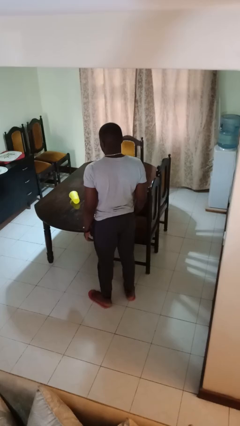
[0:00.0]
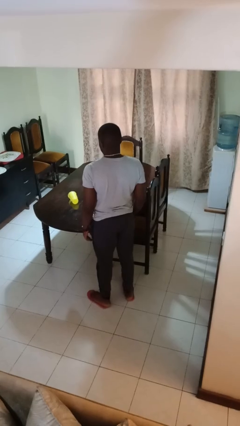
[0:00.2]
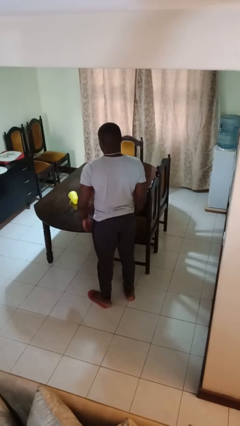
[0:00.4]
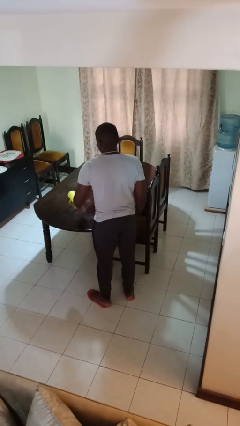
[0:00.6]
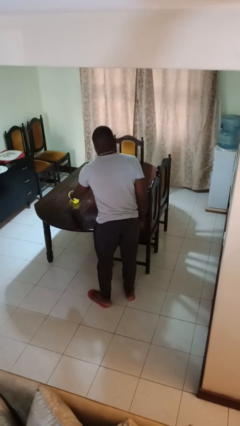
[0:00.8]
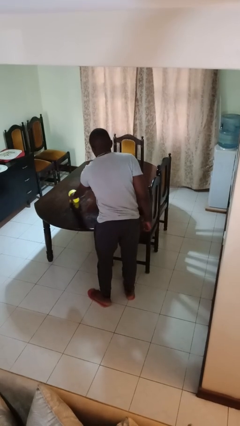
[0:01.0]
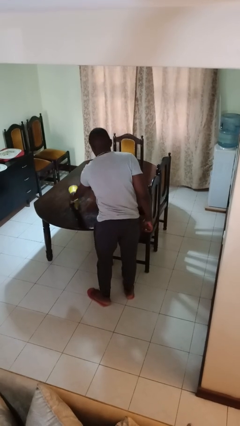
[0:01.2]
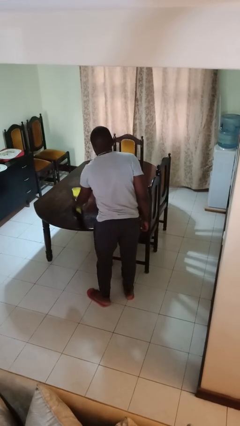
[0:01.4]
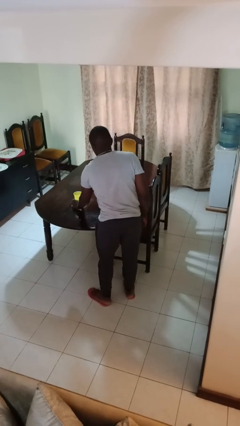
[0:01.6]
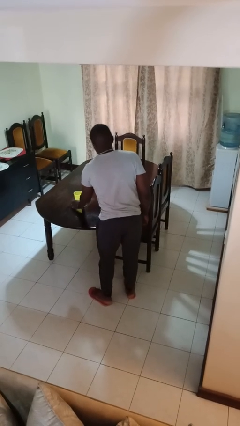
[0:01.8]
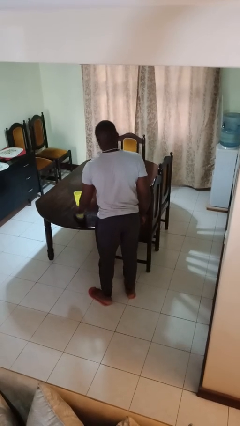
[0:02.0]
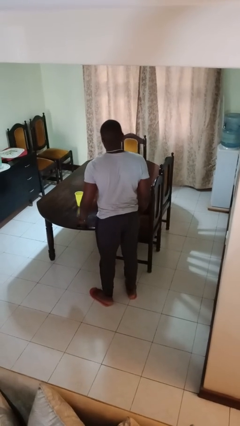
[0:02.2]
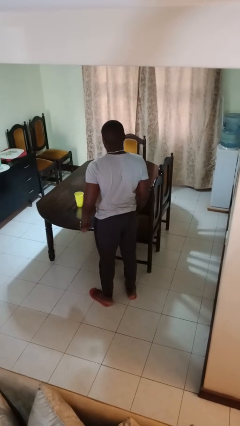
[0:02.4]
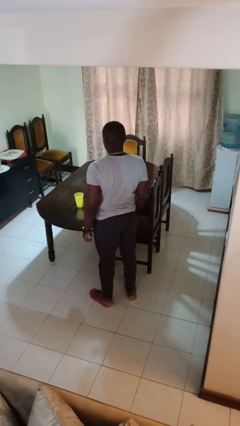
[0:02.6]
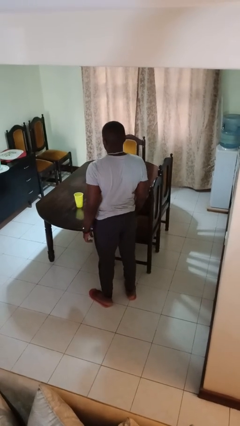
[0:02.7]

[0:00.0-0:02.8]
person sets upright glass

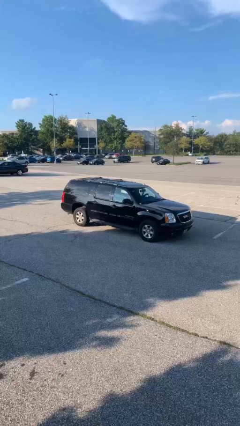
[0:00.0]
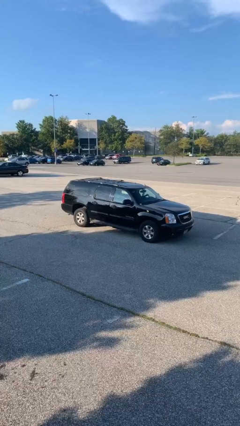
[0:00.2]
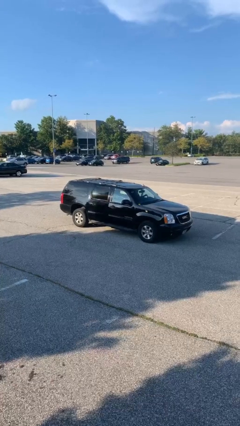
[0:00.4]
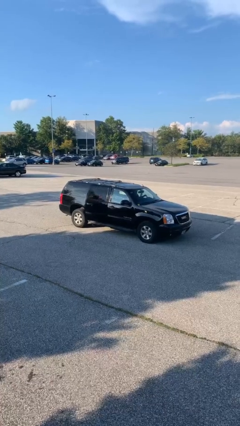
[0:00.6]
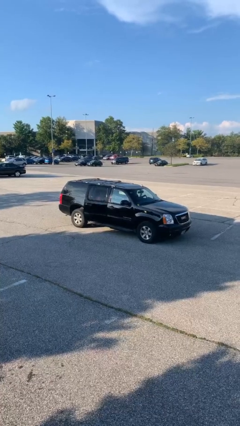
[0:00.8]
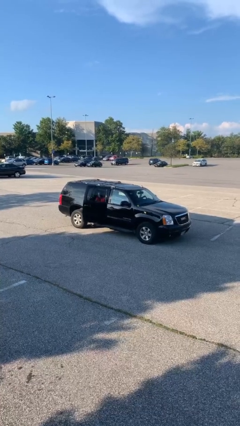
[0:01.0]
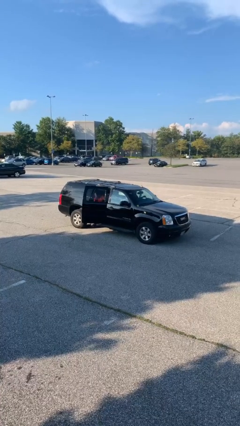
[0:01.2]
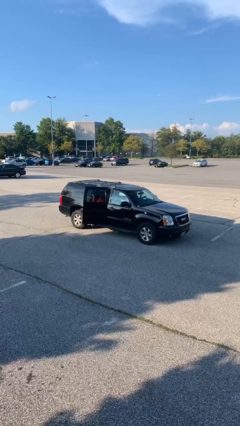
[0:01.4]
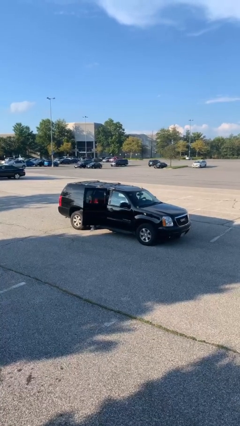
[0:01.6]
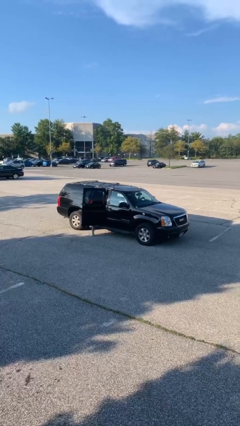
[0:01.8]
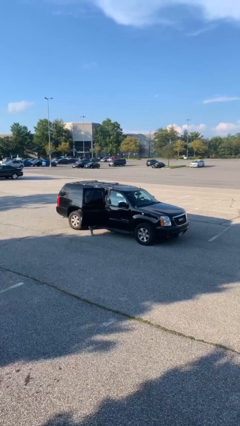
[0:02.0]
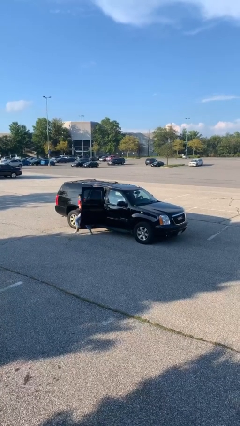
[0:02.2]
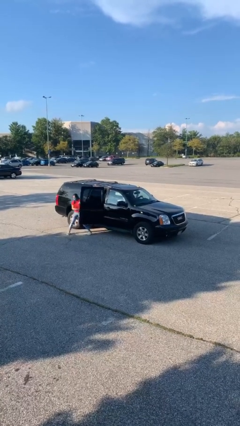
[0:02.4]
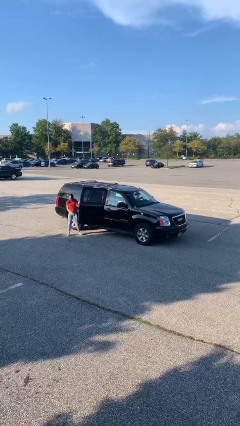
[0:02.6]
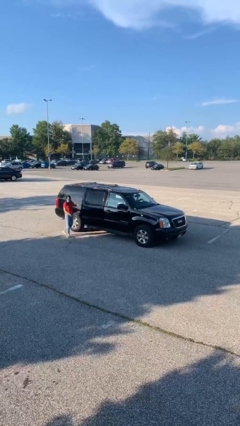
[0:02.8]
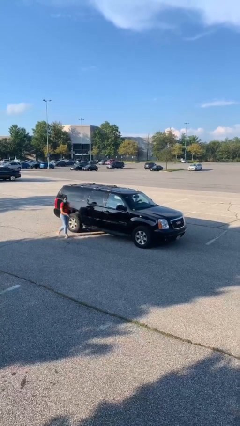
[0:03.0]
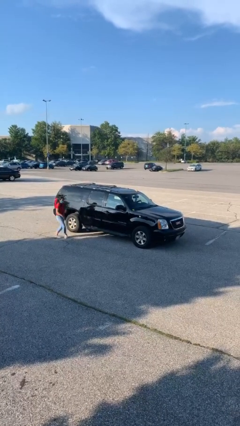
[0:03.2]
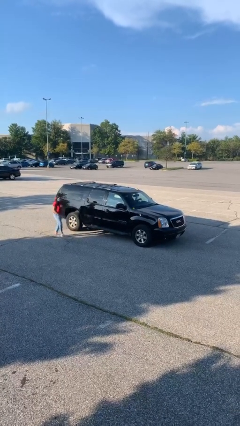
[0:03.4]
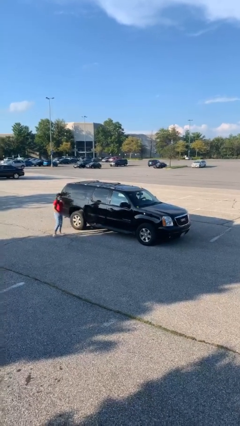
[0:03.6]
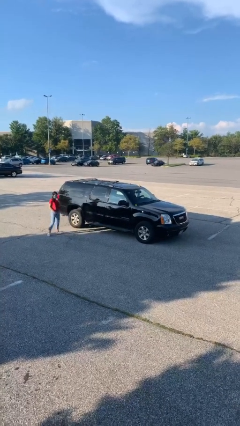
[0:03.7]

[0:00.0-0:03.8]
car drops off person

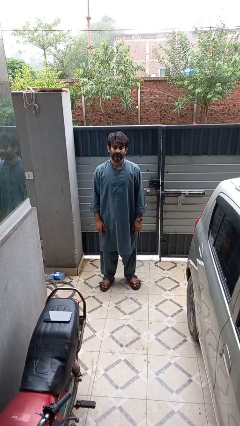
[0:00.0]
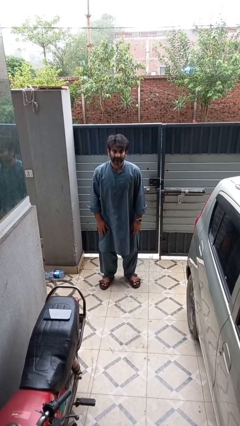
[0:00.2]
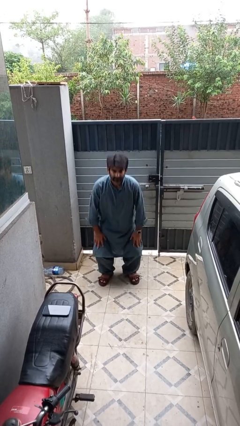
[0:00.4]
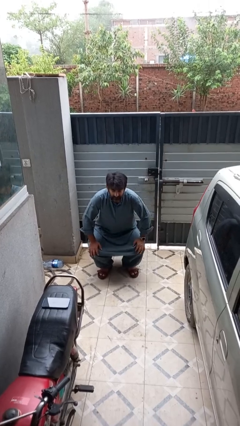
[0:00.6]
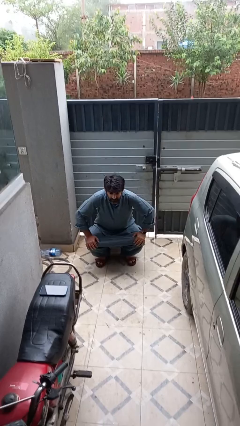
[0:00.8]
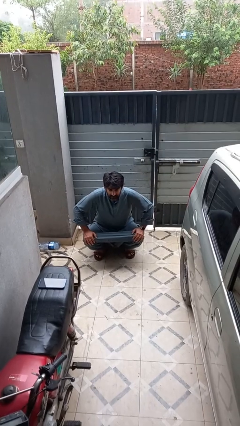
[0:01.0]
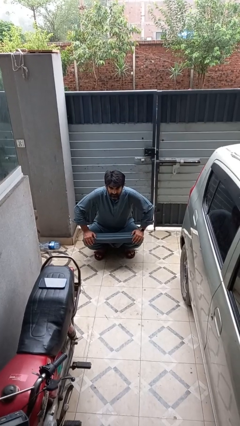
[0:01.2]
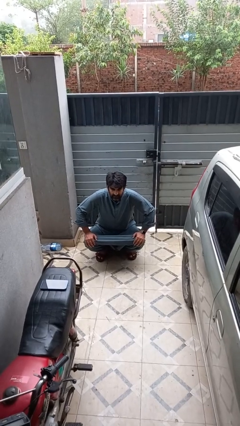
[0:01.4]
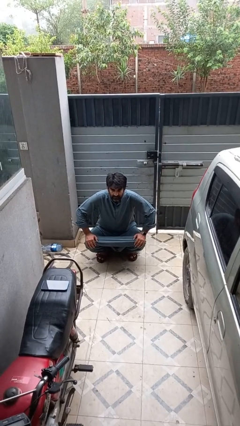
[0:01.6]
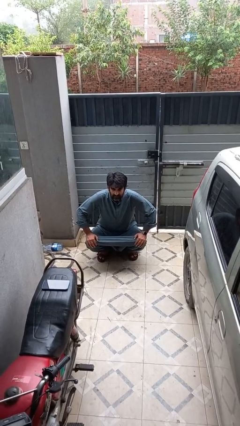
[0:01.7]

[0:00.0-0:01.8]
person squats

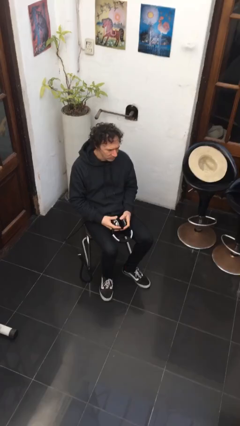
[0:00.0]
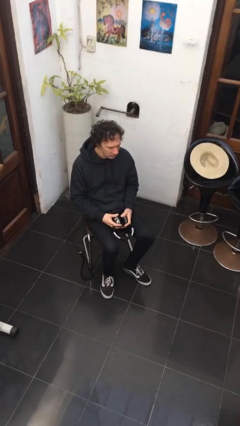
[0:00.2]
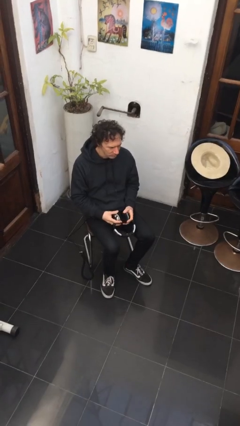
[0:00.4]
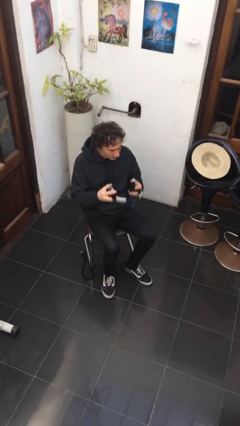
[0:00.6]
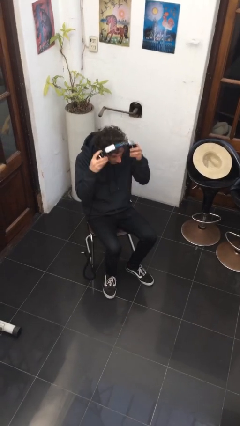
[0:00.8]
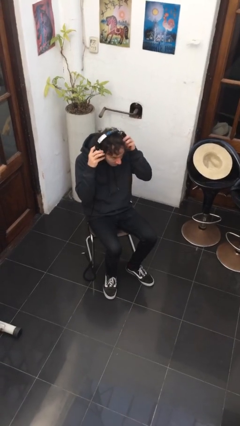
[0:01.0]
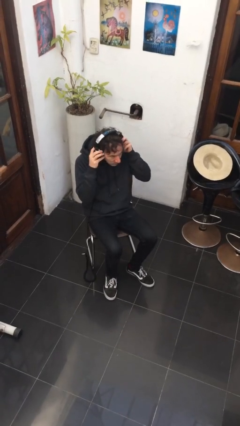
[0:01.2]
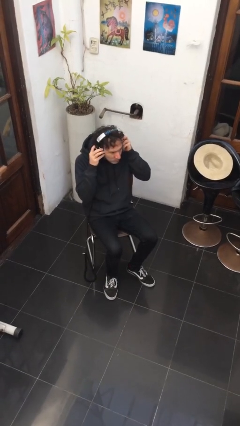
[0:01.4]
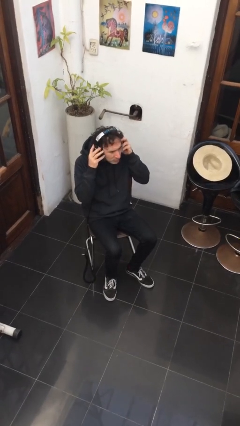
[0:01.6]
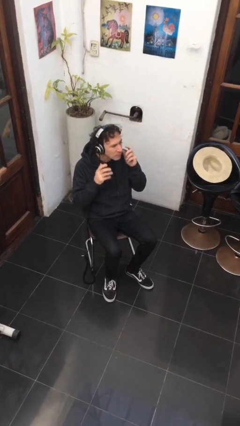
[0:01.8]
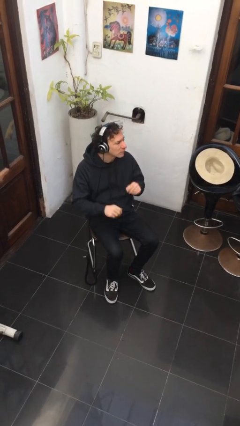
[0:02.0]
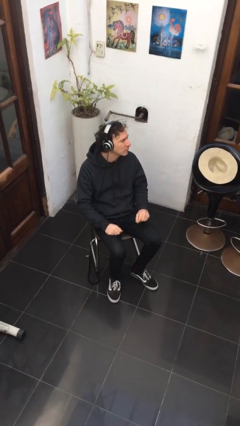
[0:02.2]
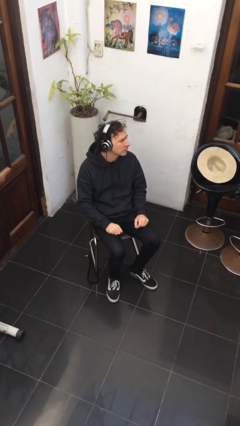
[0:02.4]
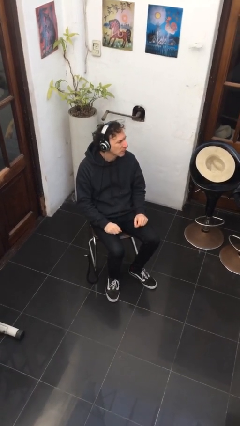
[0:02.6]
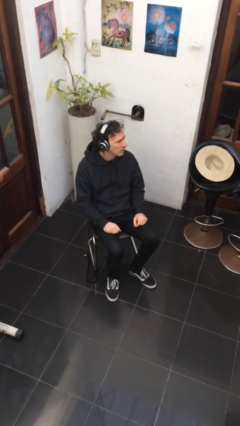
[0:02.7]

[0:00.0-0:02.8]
person puts on headphones

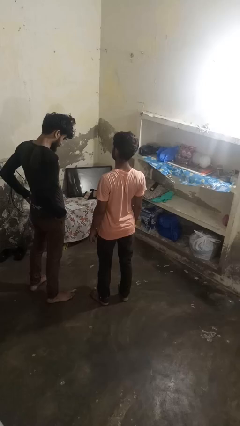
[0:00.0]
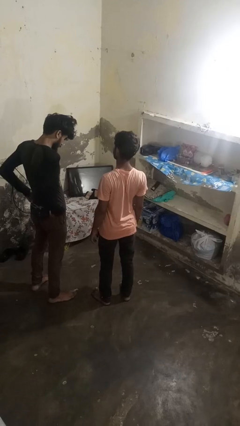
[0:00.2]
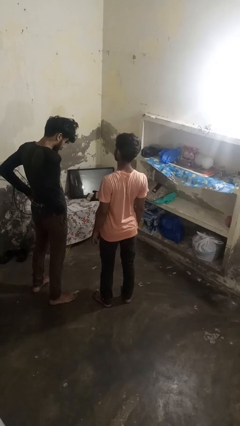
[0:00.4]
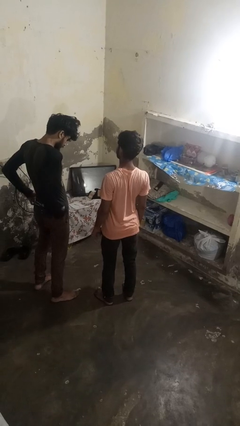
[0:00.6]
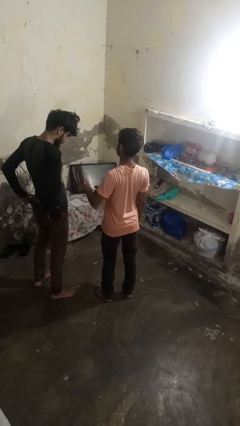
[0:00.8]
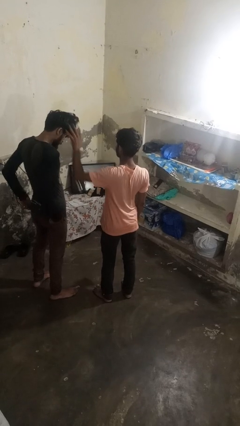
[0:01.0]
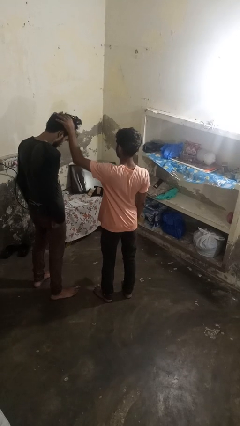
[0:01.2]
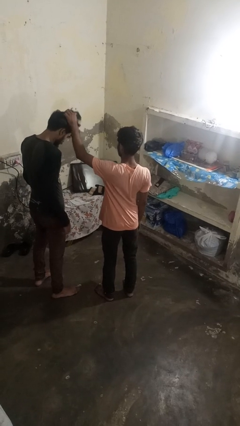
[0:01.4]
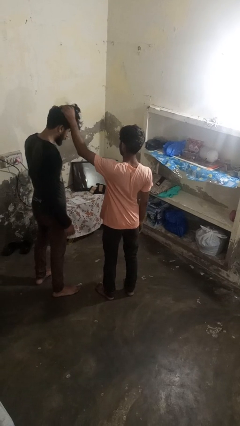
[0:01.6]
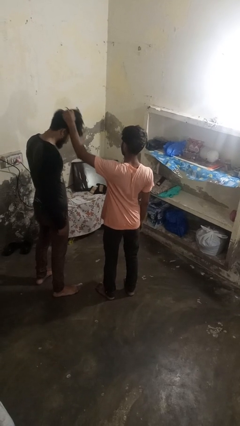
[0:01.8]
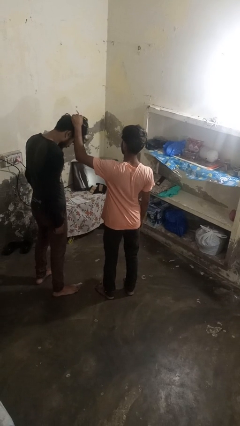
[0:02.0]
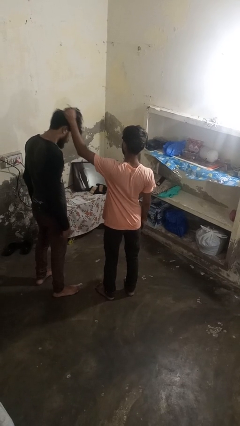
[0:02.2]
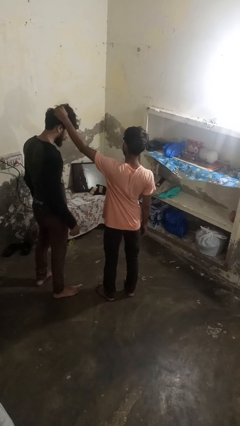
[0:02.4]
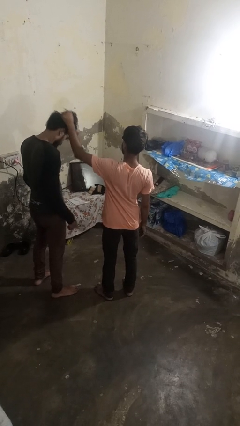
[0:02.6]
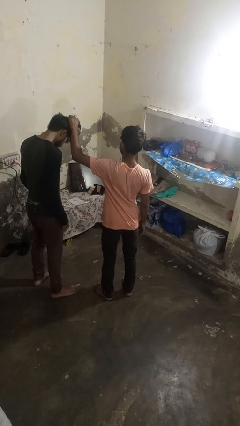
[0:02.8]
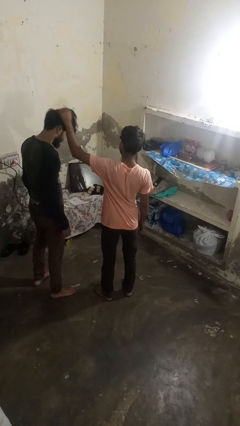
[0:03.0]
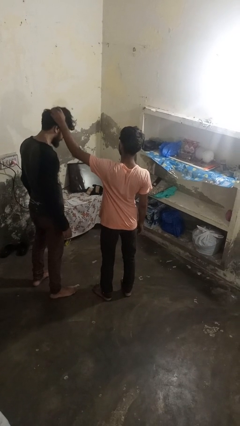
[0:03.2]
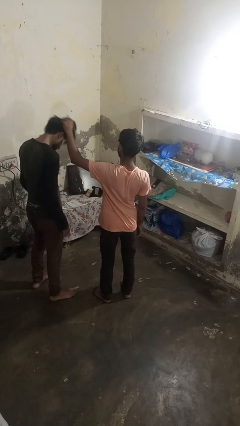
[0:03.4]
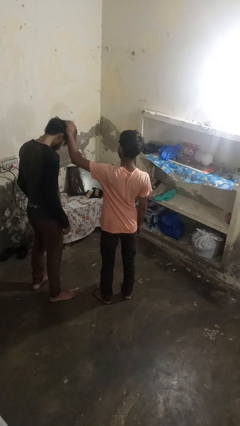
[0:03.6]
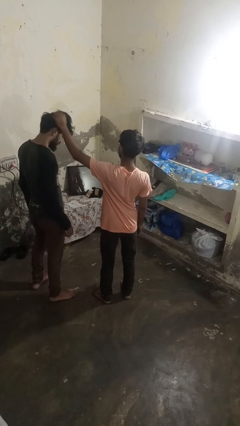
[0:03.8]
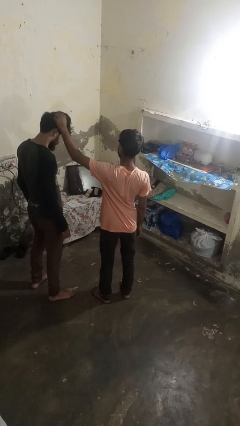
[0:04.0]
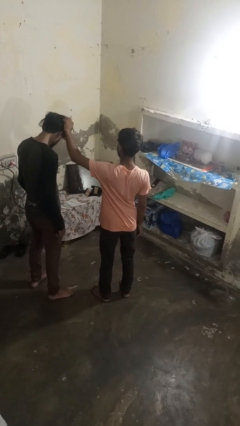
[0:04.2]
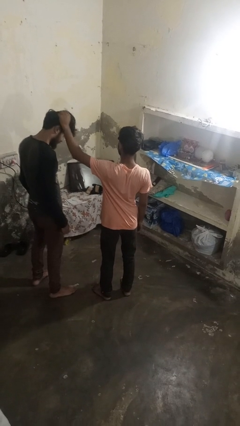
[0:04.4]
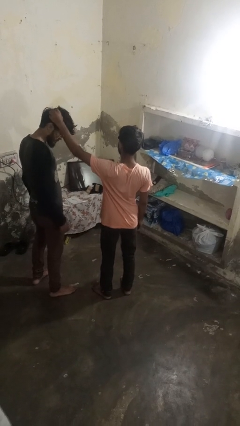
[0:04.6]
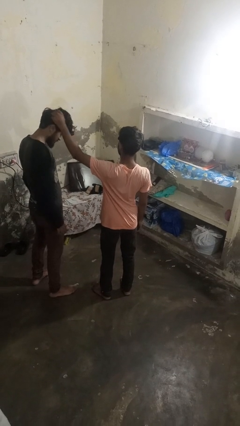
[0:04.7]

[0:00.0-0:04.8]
person grabs person by hair

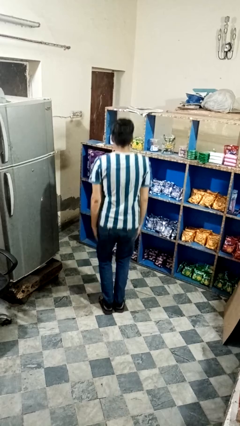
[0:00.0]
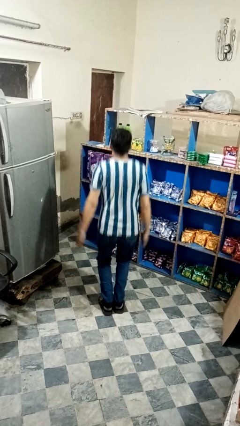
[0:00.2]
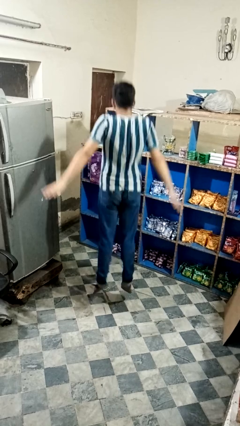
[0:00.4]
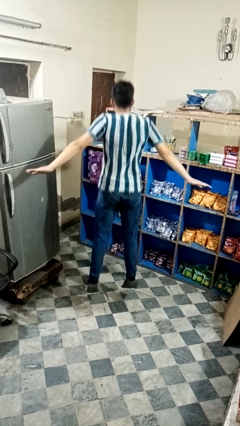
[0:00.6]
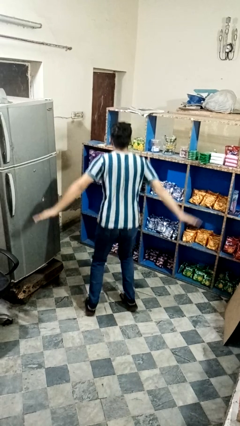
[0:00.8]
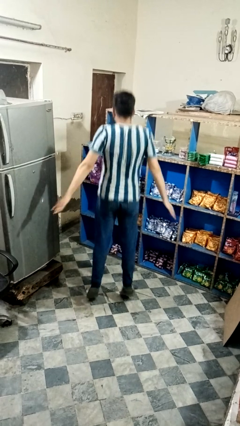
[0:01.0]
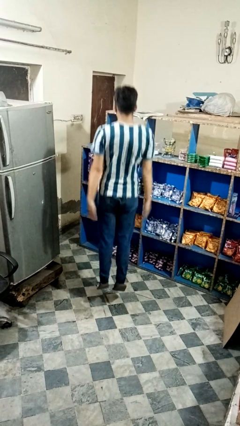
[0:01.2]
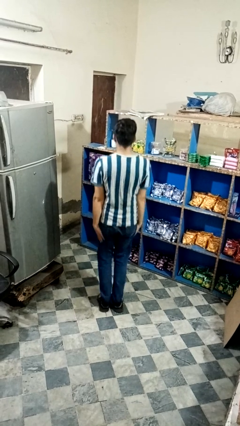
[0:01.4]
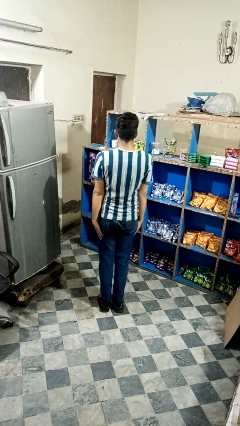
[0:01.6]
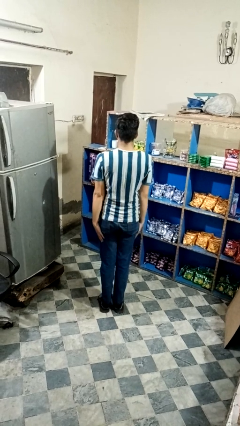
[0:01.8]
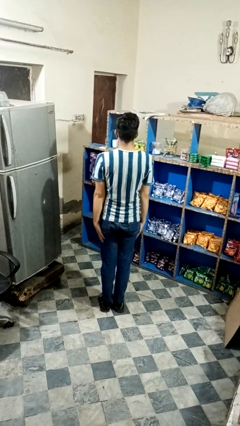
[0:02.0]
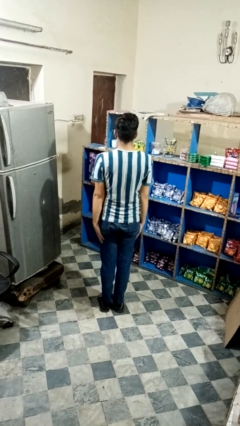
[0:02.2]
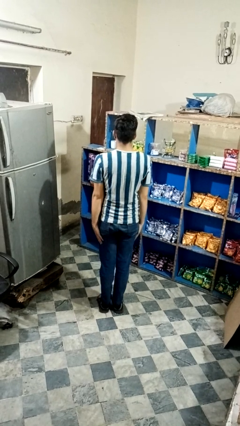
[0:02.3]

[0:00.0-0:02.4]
person exercises with jumping jacks
